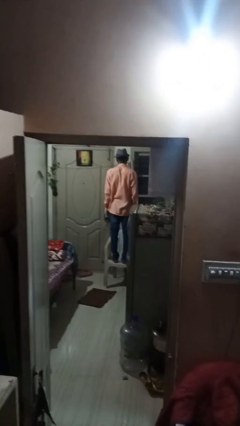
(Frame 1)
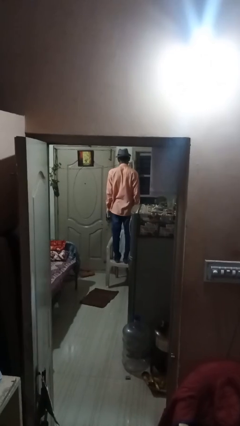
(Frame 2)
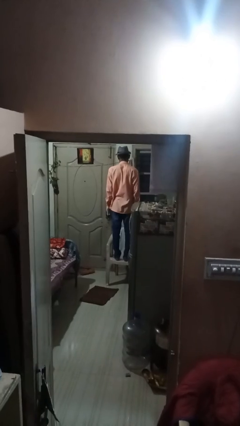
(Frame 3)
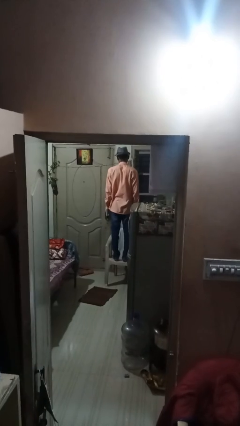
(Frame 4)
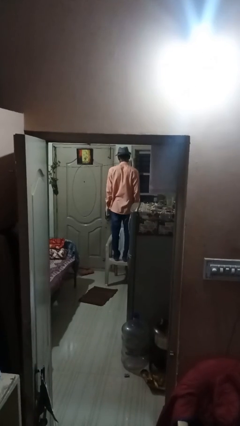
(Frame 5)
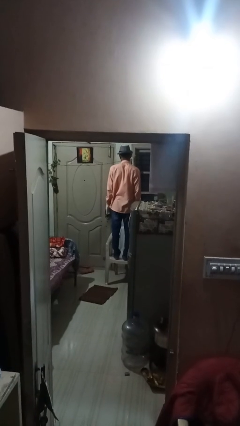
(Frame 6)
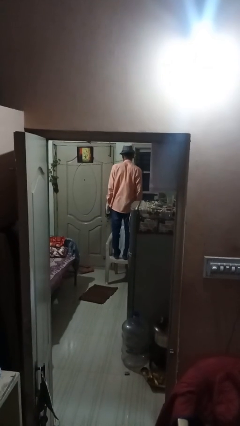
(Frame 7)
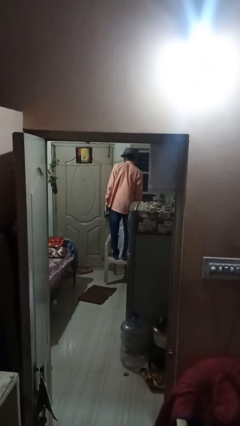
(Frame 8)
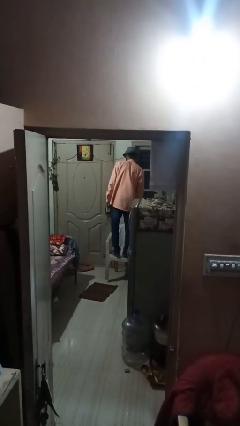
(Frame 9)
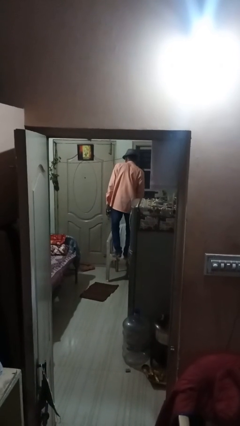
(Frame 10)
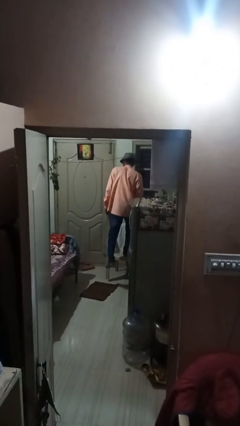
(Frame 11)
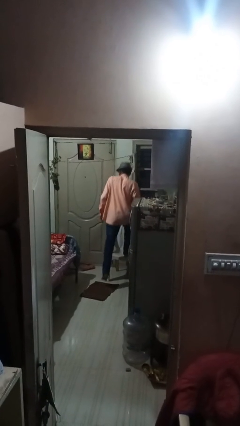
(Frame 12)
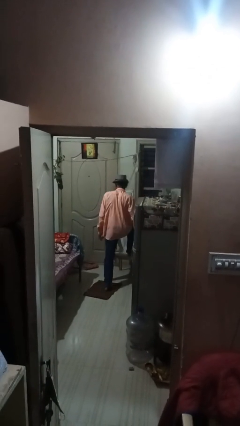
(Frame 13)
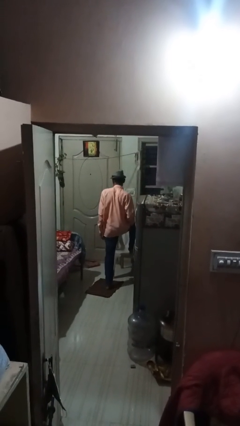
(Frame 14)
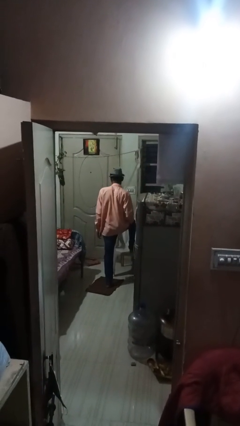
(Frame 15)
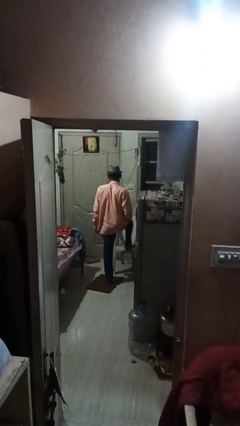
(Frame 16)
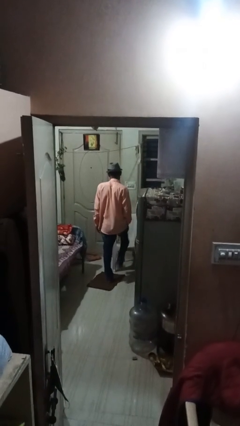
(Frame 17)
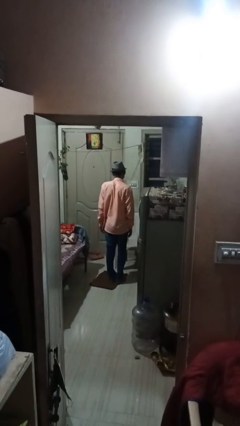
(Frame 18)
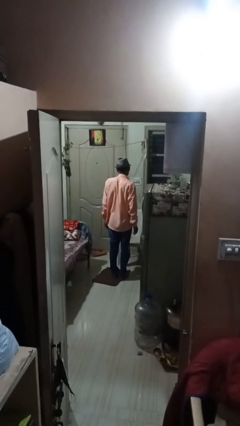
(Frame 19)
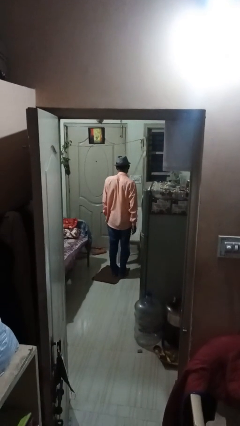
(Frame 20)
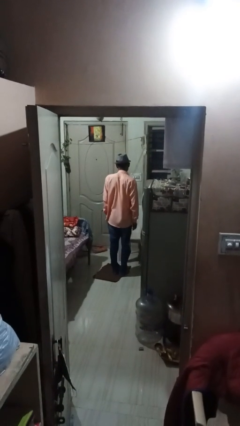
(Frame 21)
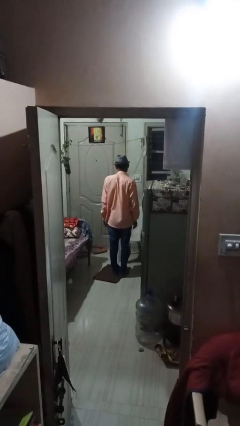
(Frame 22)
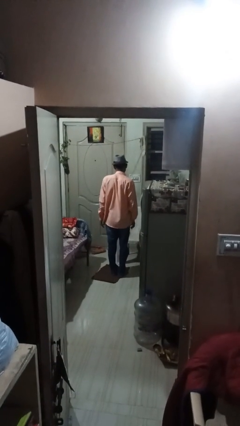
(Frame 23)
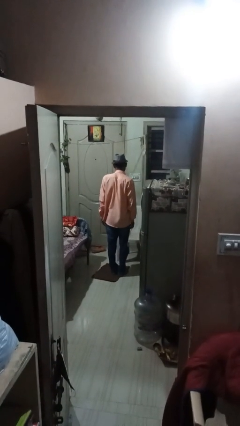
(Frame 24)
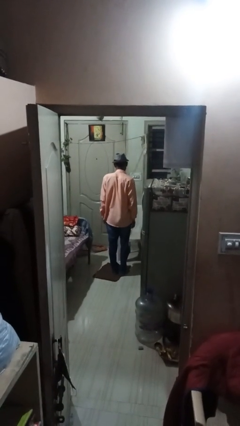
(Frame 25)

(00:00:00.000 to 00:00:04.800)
person climbs off chair

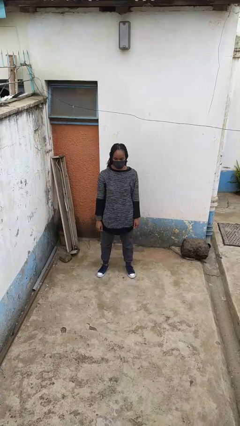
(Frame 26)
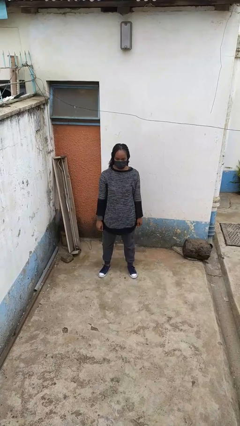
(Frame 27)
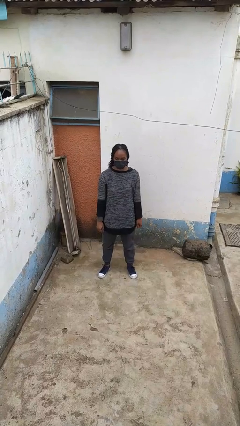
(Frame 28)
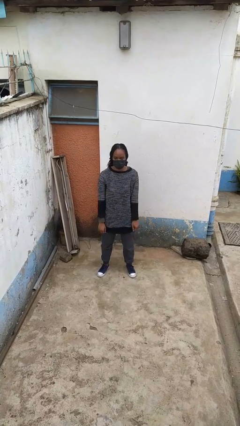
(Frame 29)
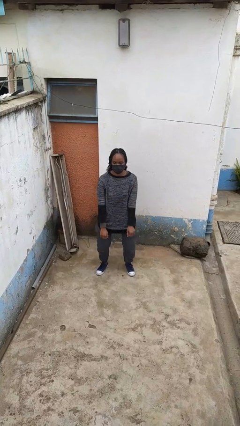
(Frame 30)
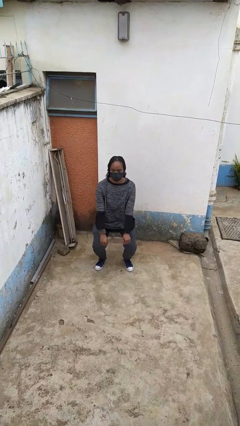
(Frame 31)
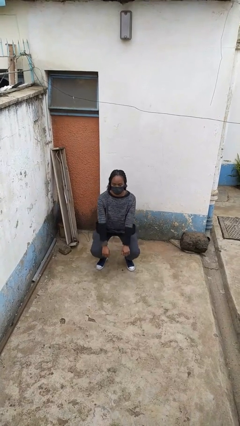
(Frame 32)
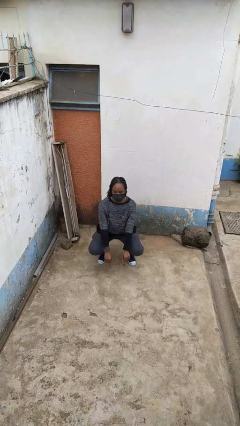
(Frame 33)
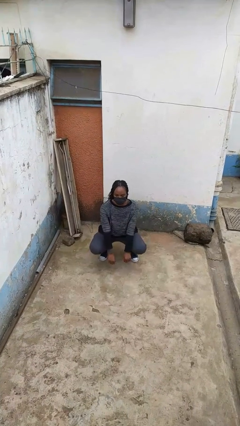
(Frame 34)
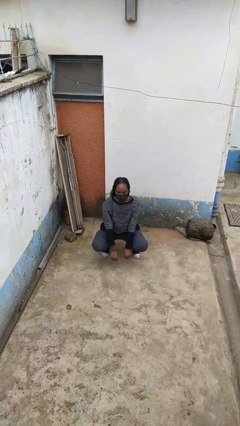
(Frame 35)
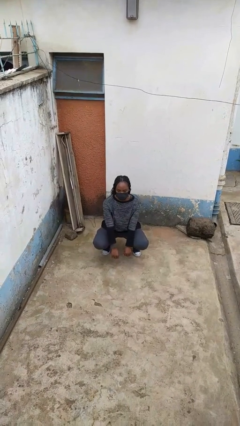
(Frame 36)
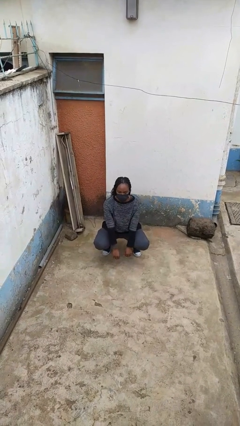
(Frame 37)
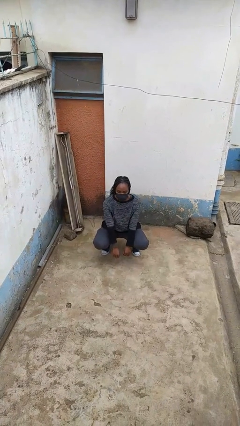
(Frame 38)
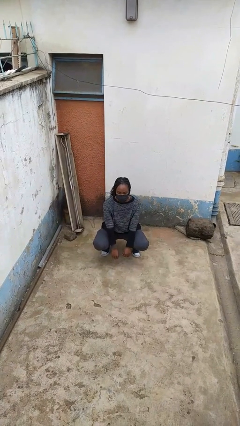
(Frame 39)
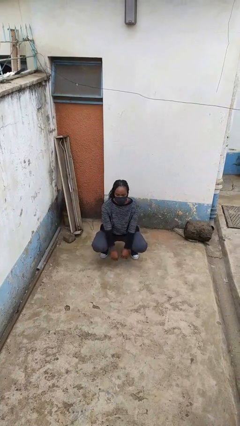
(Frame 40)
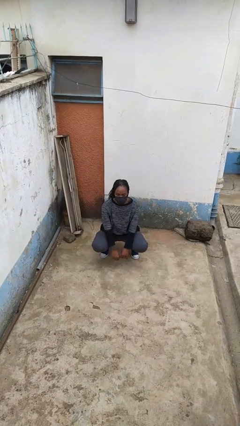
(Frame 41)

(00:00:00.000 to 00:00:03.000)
person squats

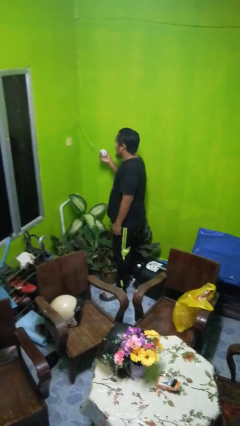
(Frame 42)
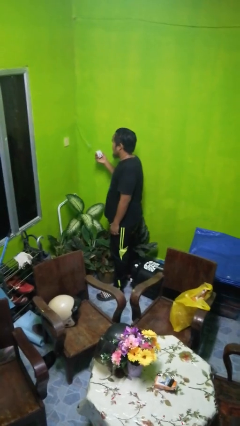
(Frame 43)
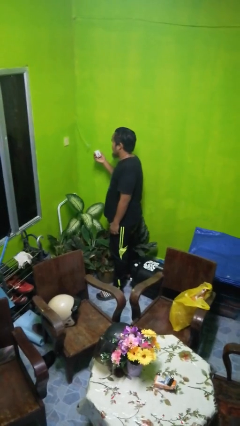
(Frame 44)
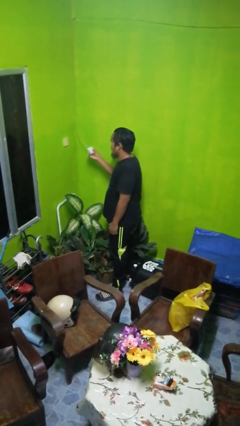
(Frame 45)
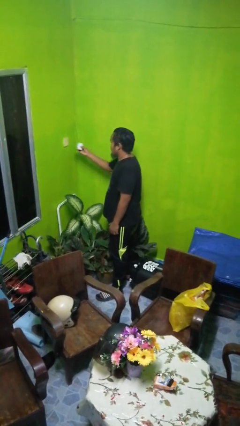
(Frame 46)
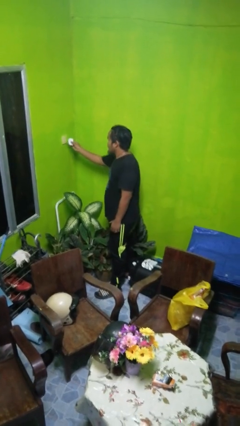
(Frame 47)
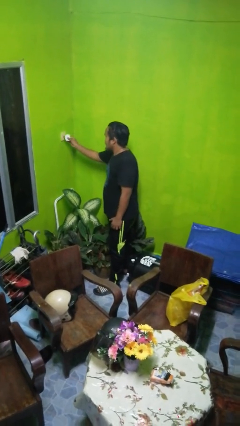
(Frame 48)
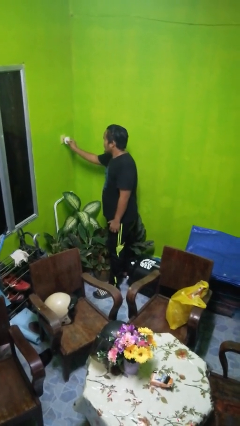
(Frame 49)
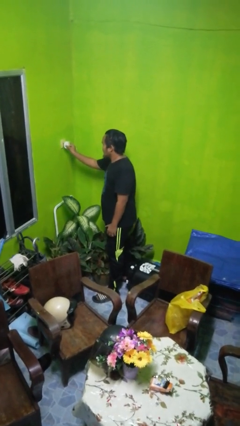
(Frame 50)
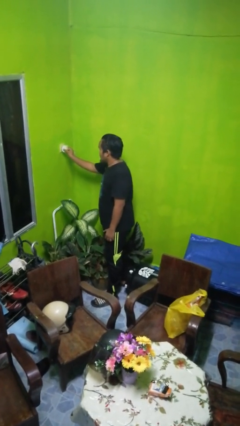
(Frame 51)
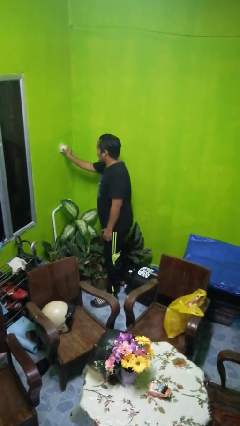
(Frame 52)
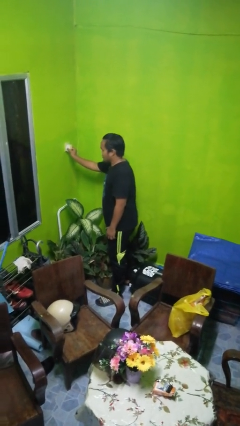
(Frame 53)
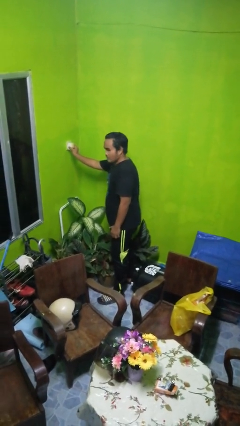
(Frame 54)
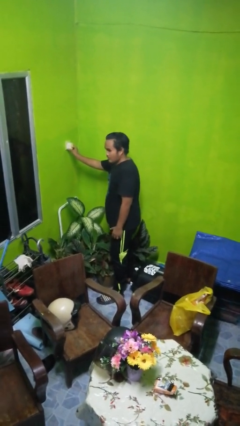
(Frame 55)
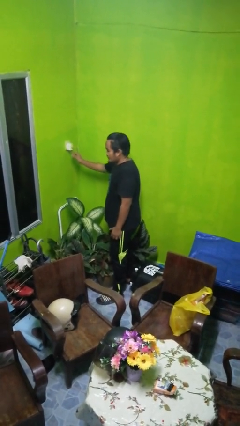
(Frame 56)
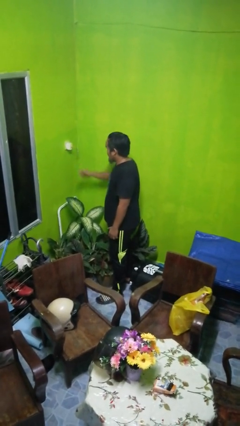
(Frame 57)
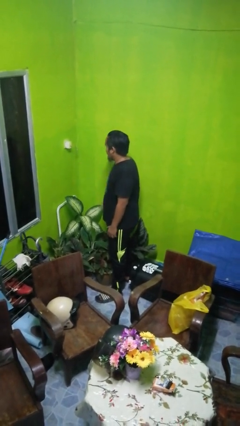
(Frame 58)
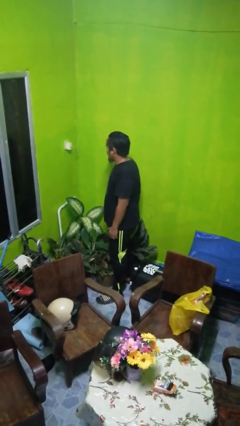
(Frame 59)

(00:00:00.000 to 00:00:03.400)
person plugs into electrical socket

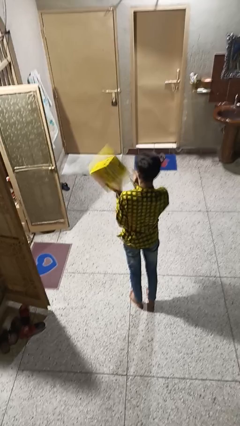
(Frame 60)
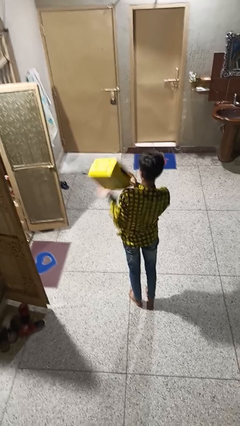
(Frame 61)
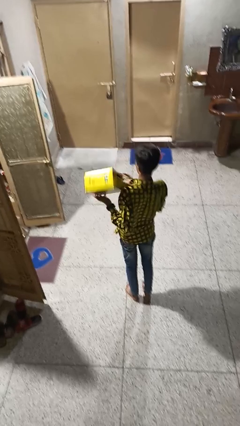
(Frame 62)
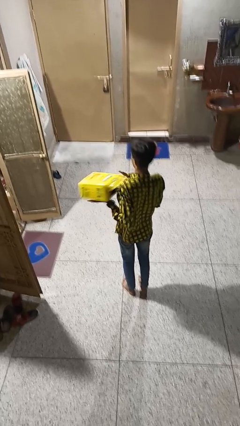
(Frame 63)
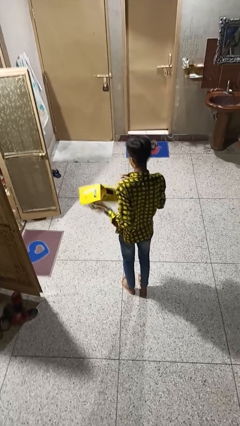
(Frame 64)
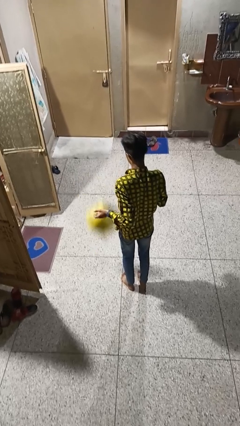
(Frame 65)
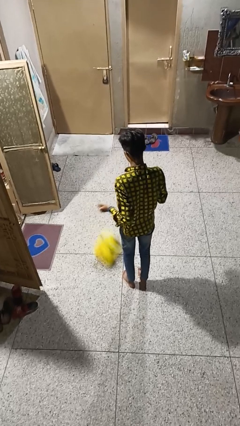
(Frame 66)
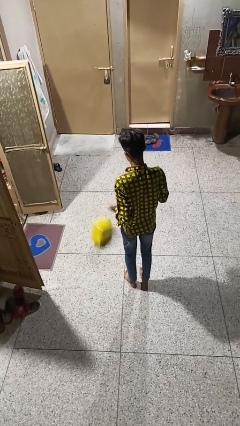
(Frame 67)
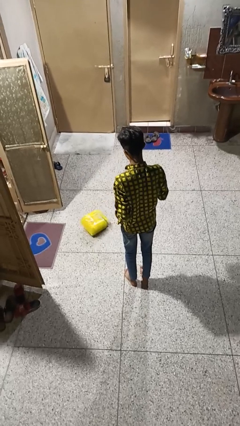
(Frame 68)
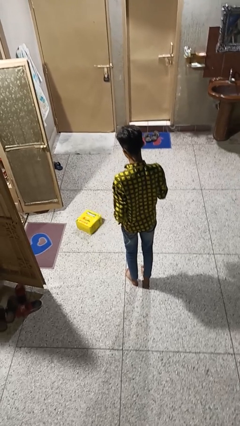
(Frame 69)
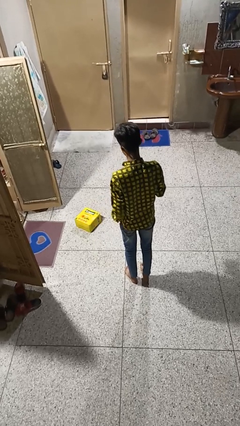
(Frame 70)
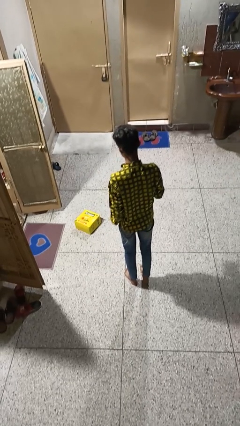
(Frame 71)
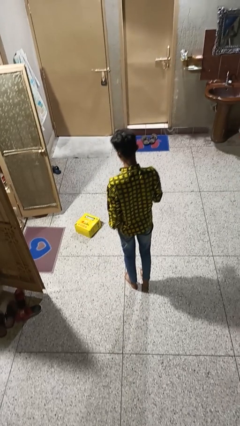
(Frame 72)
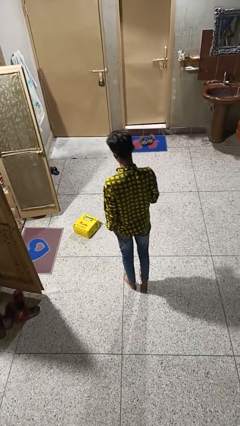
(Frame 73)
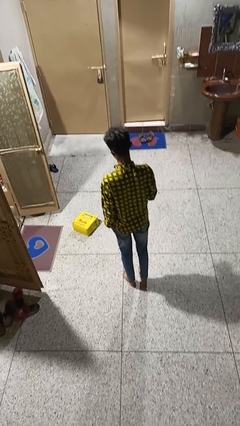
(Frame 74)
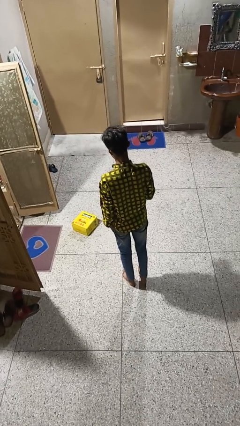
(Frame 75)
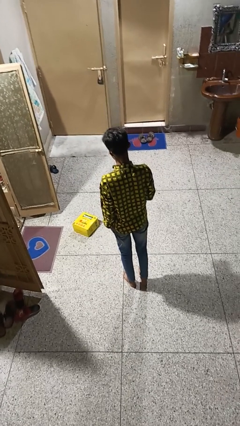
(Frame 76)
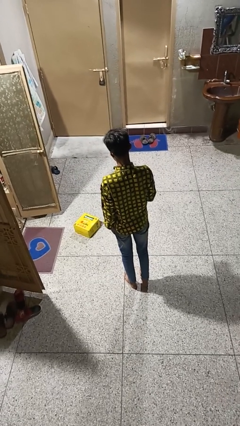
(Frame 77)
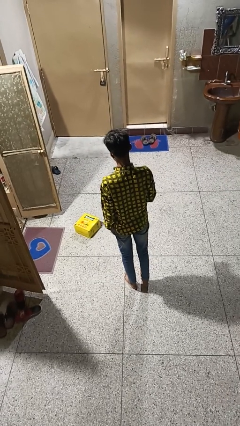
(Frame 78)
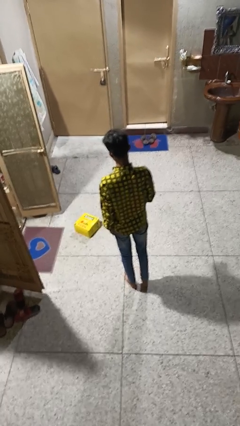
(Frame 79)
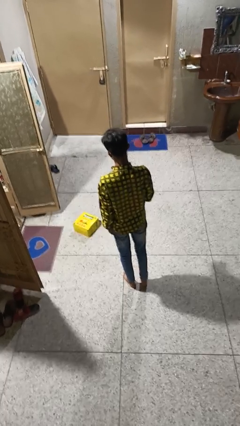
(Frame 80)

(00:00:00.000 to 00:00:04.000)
person catches dropped object

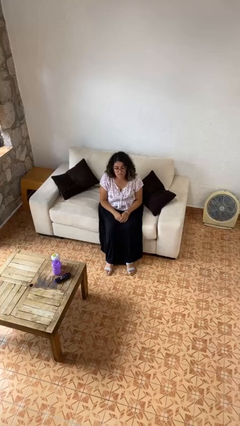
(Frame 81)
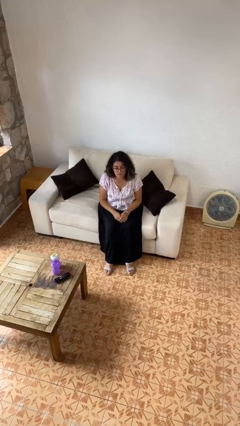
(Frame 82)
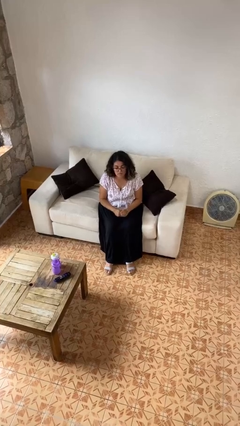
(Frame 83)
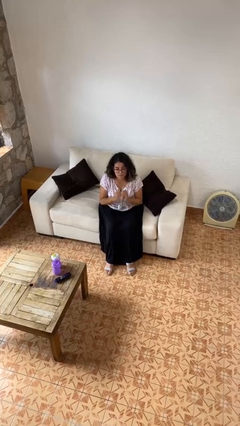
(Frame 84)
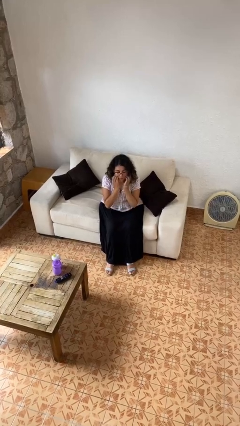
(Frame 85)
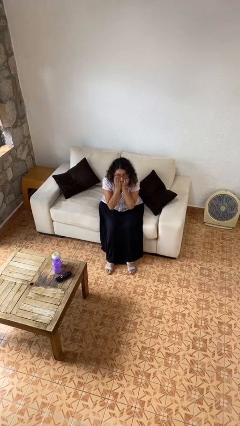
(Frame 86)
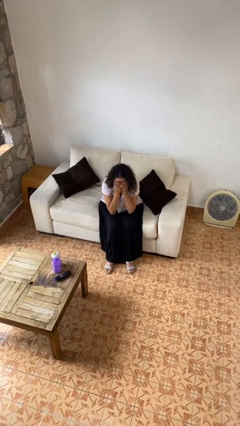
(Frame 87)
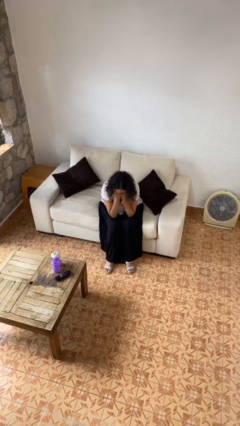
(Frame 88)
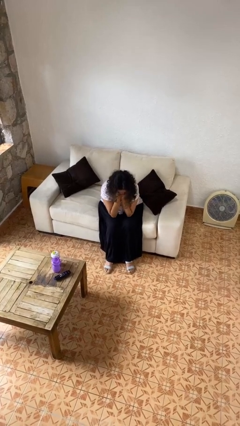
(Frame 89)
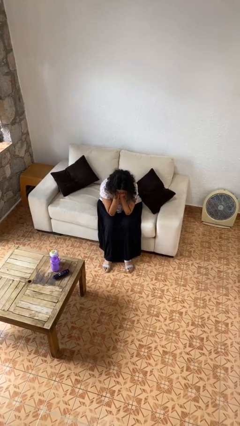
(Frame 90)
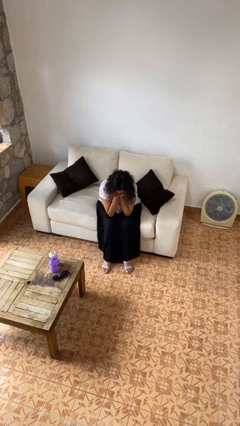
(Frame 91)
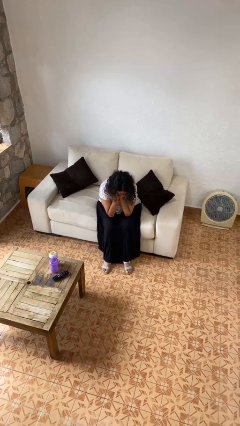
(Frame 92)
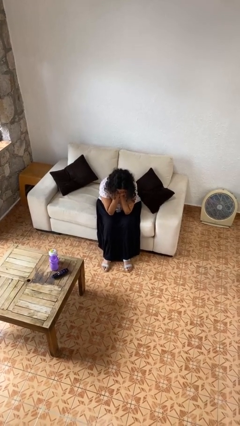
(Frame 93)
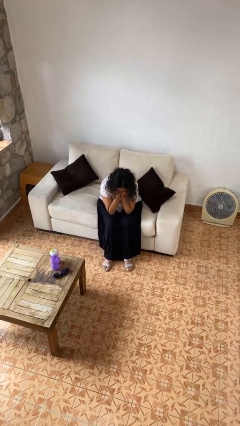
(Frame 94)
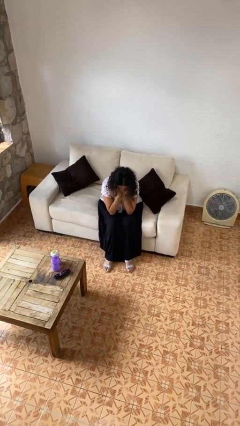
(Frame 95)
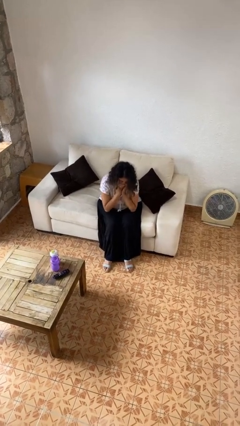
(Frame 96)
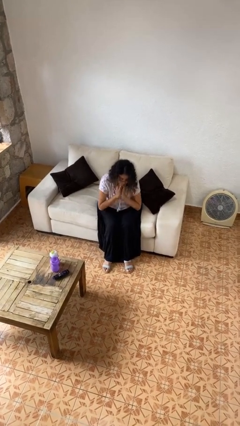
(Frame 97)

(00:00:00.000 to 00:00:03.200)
person covers face with hands
